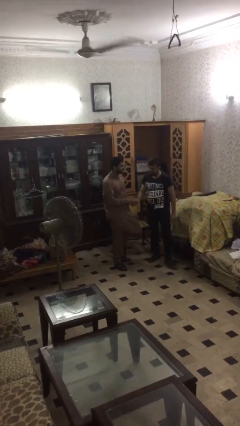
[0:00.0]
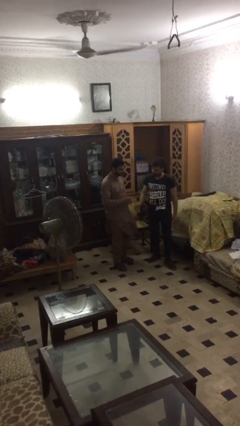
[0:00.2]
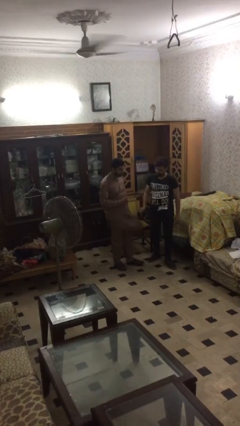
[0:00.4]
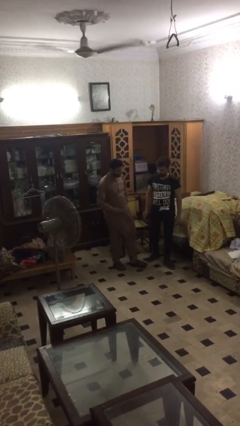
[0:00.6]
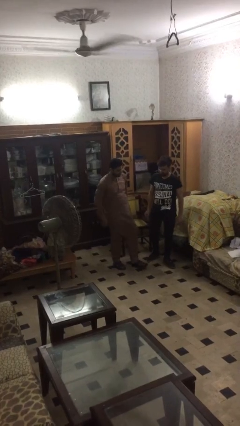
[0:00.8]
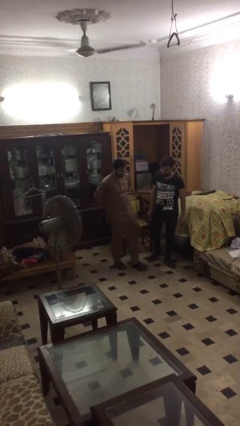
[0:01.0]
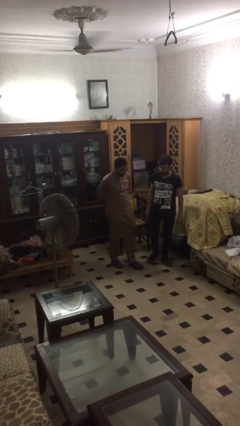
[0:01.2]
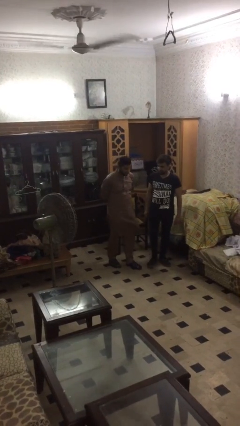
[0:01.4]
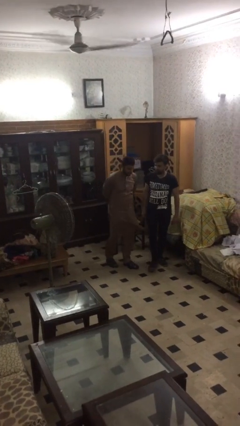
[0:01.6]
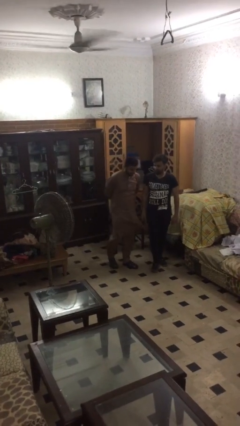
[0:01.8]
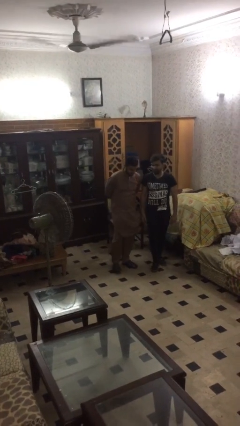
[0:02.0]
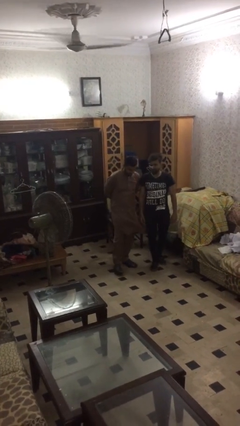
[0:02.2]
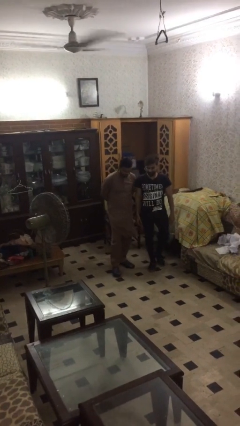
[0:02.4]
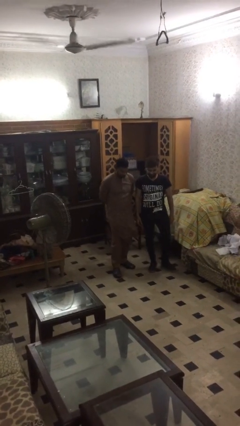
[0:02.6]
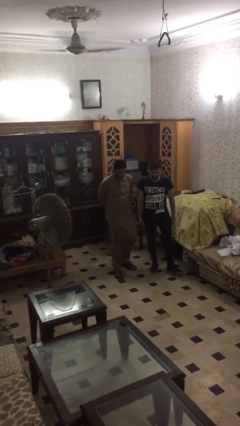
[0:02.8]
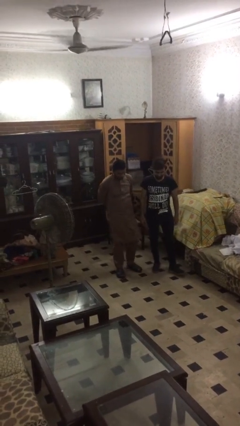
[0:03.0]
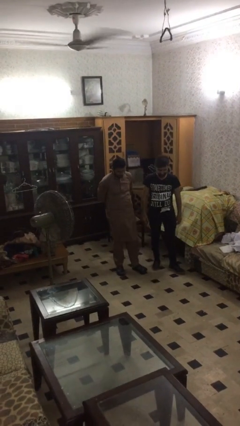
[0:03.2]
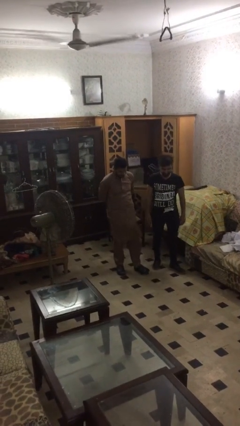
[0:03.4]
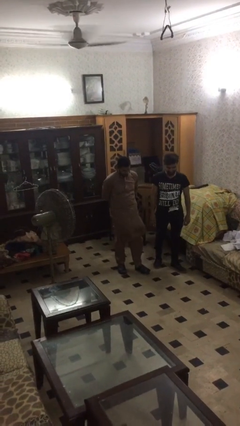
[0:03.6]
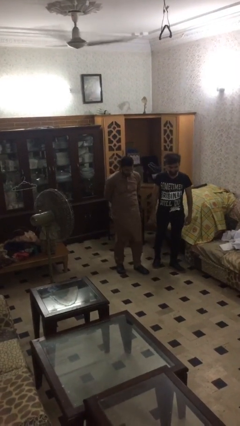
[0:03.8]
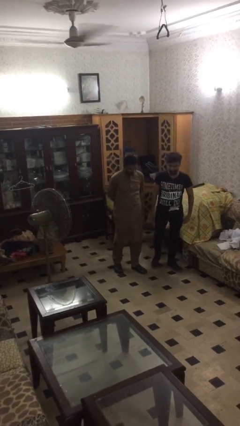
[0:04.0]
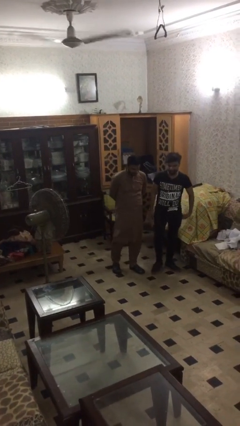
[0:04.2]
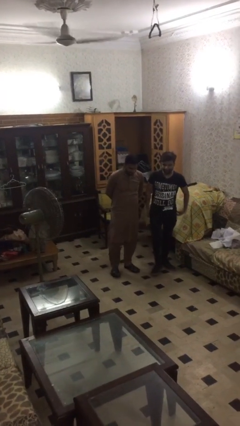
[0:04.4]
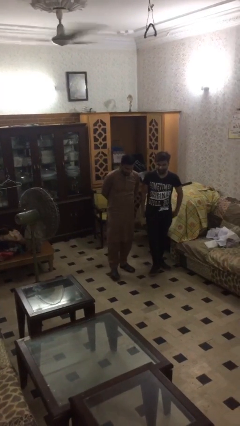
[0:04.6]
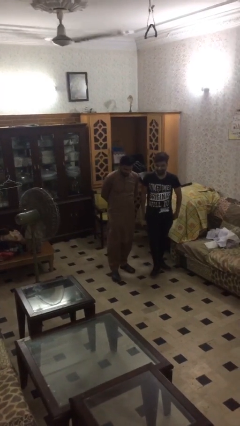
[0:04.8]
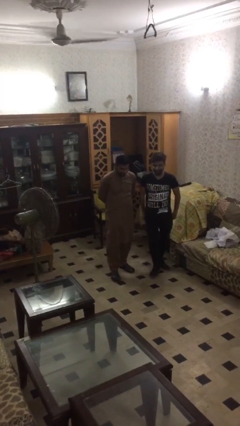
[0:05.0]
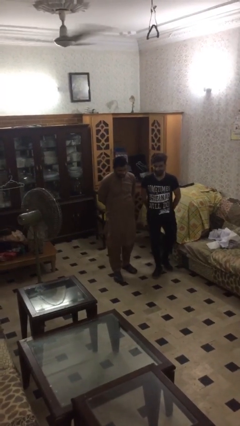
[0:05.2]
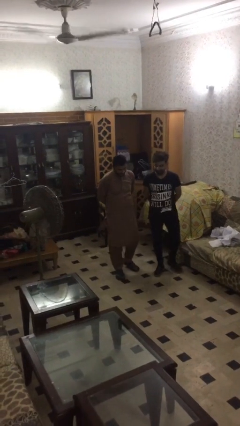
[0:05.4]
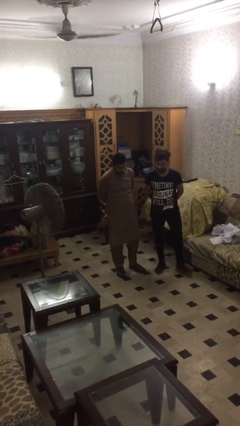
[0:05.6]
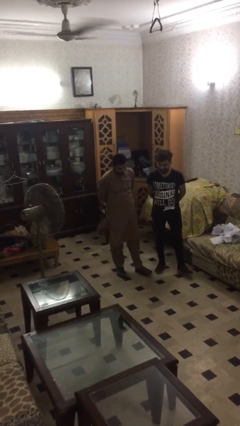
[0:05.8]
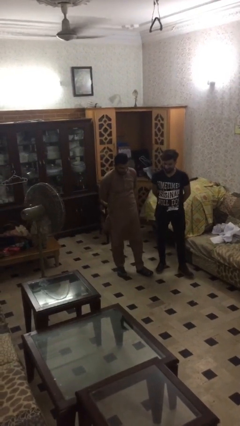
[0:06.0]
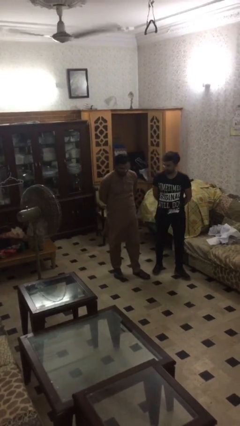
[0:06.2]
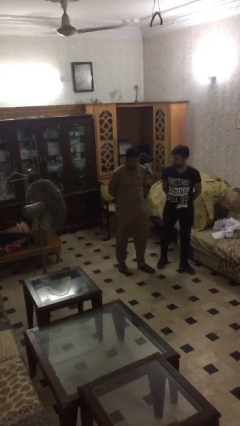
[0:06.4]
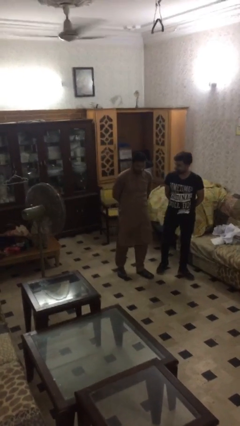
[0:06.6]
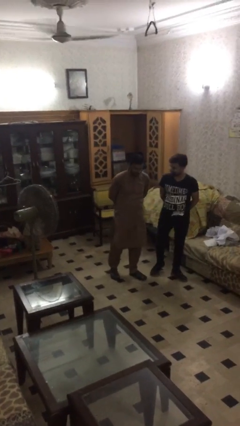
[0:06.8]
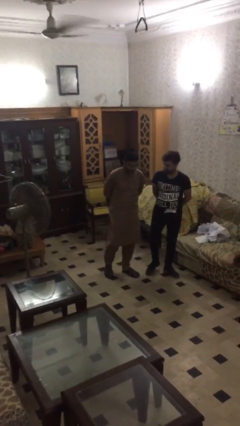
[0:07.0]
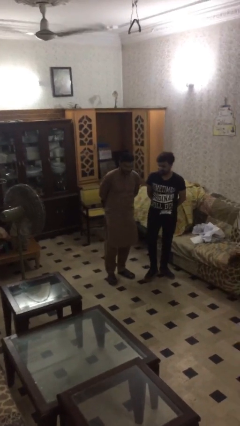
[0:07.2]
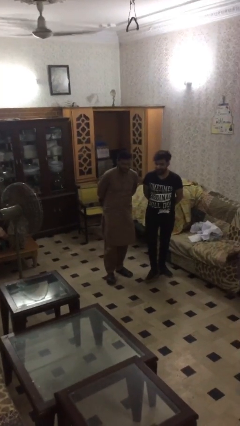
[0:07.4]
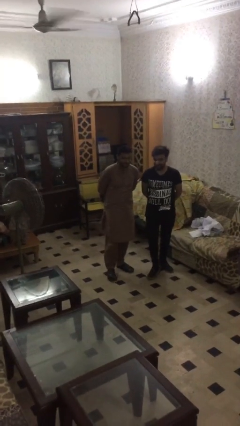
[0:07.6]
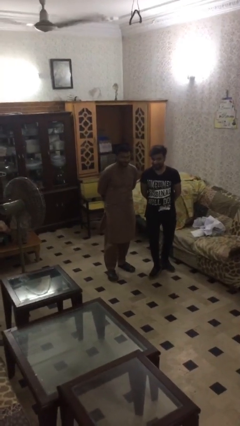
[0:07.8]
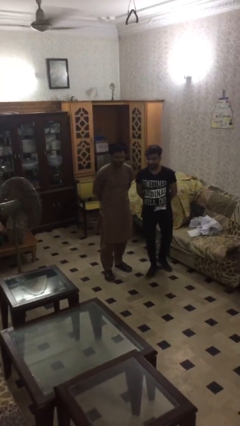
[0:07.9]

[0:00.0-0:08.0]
person talks to person

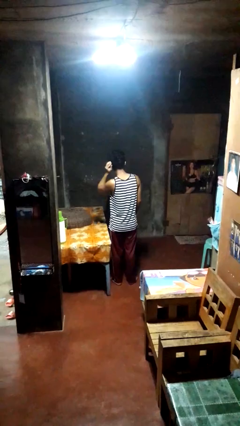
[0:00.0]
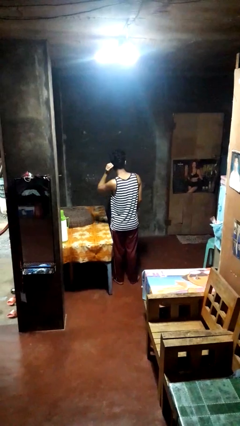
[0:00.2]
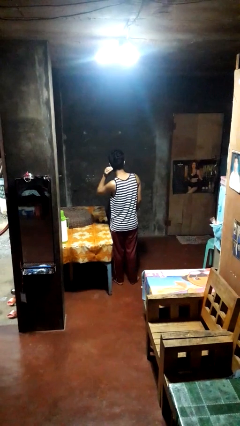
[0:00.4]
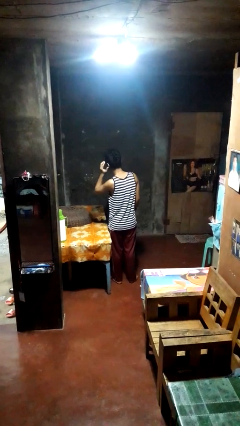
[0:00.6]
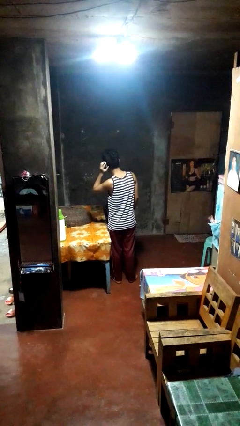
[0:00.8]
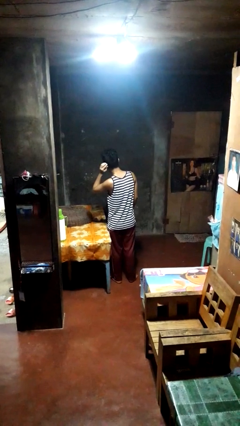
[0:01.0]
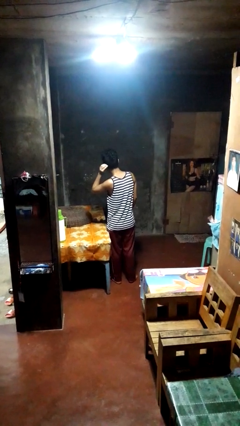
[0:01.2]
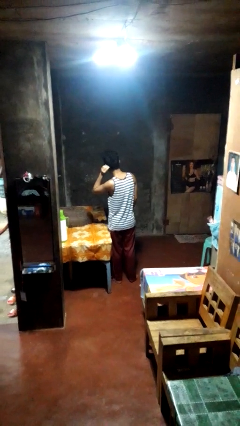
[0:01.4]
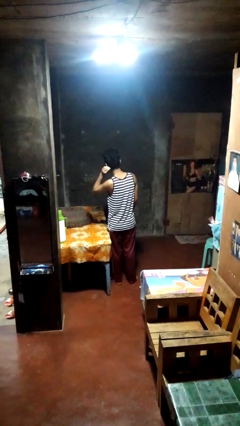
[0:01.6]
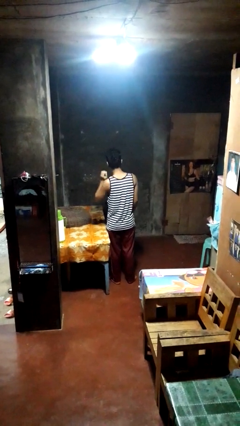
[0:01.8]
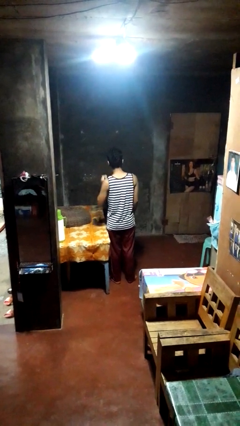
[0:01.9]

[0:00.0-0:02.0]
person strokes hair

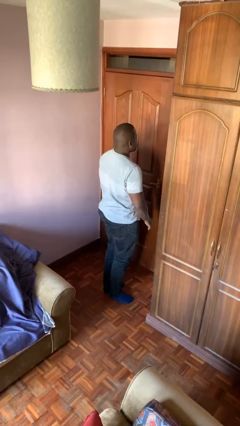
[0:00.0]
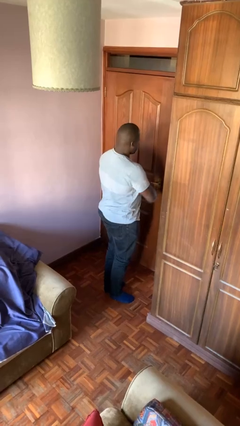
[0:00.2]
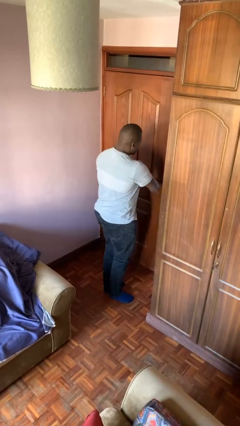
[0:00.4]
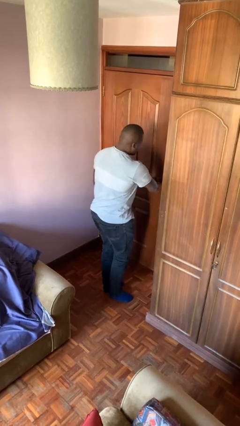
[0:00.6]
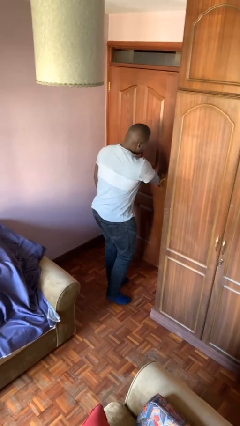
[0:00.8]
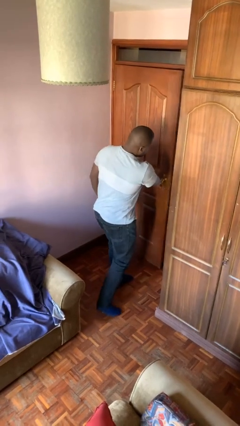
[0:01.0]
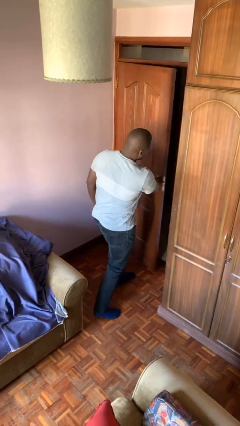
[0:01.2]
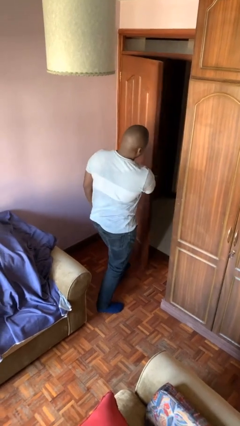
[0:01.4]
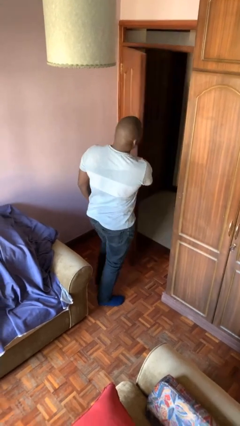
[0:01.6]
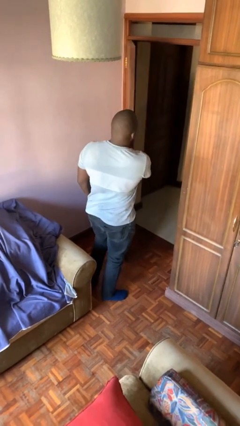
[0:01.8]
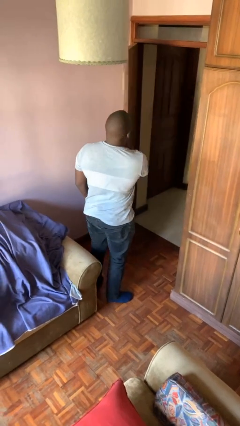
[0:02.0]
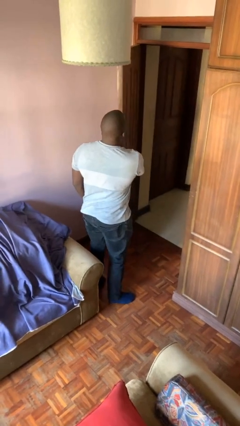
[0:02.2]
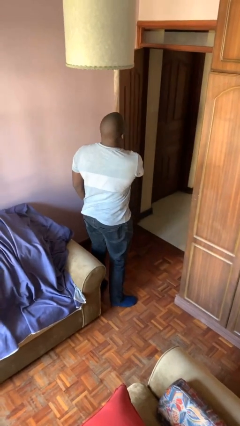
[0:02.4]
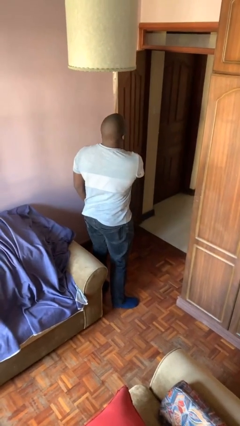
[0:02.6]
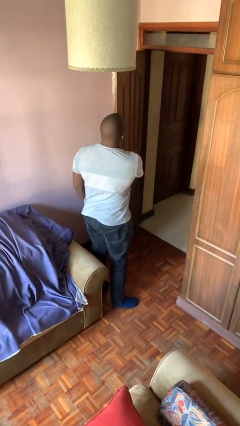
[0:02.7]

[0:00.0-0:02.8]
person opens facility door

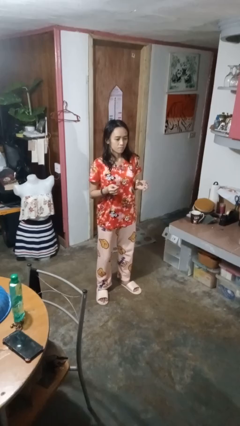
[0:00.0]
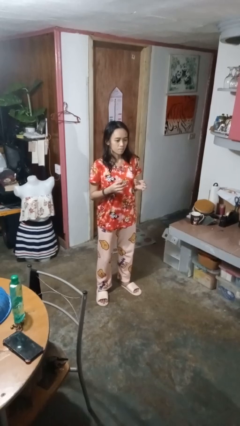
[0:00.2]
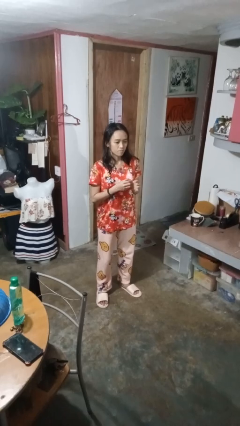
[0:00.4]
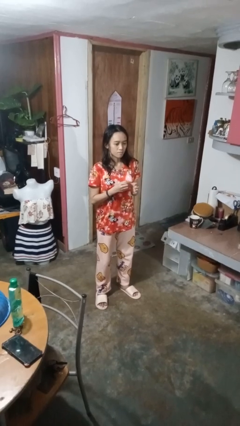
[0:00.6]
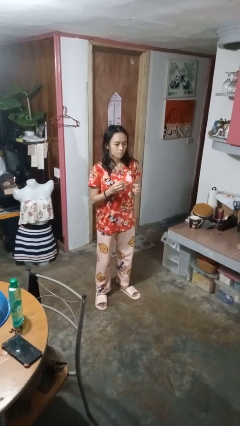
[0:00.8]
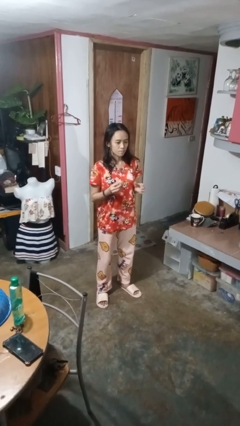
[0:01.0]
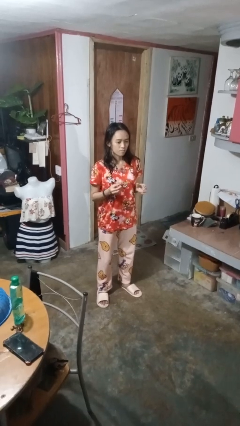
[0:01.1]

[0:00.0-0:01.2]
person takes off ring

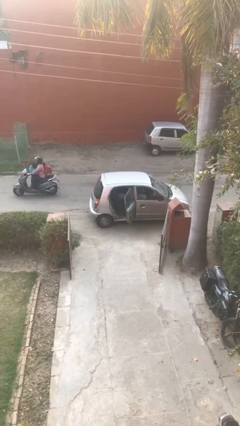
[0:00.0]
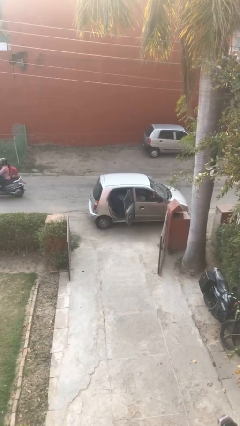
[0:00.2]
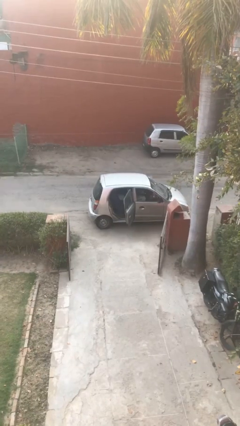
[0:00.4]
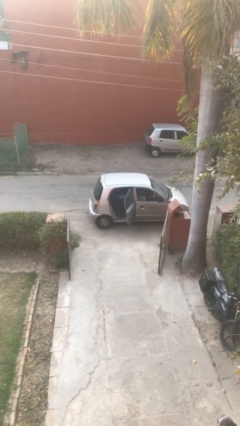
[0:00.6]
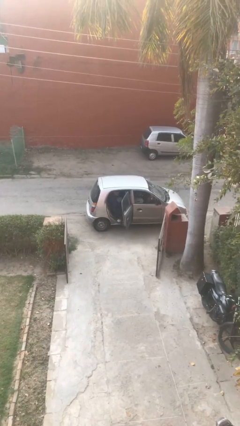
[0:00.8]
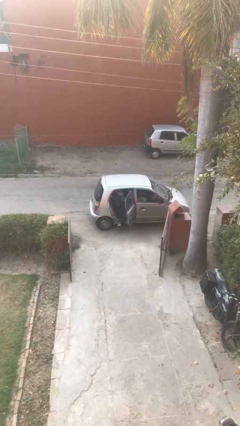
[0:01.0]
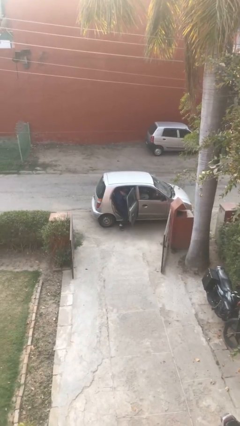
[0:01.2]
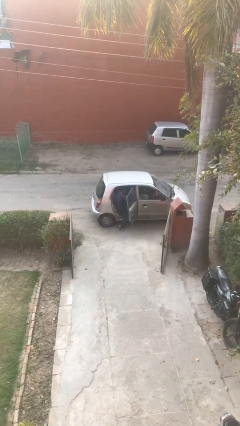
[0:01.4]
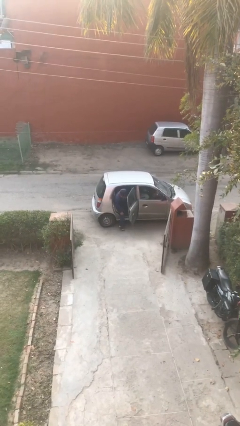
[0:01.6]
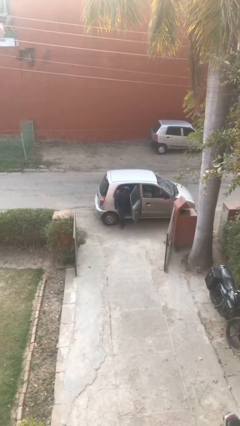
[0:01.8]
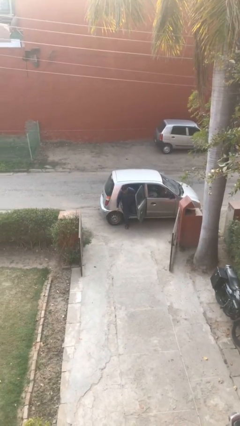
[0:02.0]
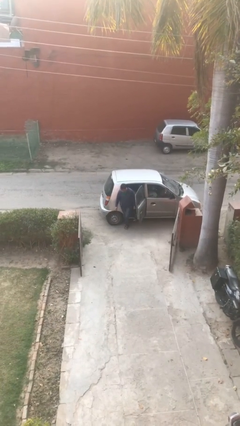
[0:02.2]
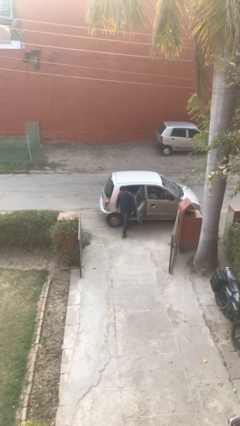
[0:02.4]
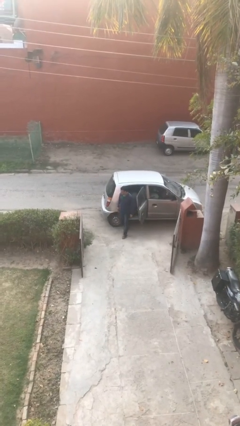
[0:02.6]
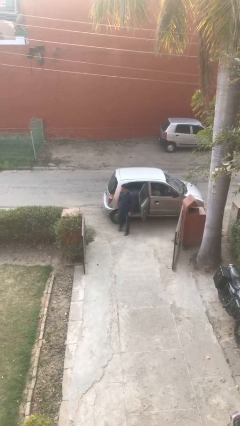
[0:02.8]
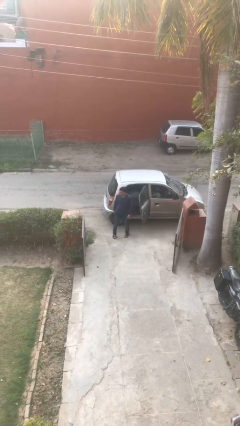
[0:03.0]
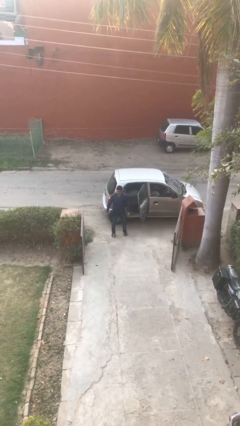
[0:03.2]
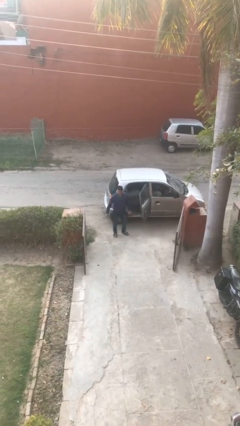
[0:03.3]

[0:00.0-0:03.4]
person exits car

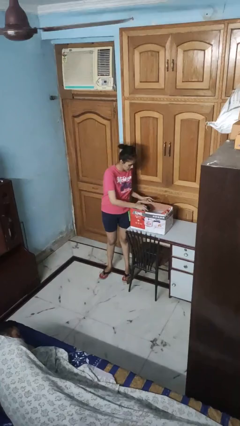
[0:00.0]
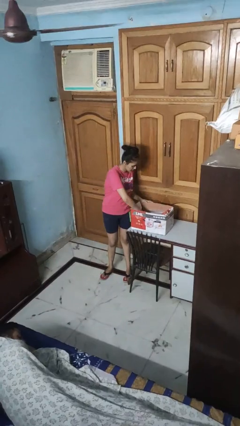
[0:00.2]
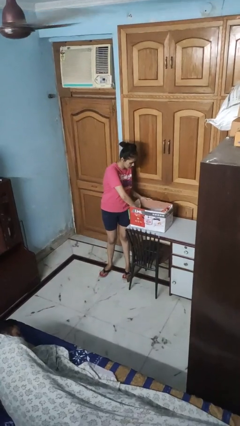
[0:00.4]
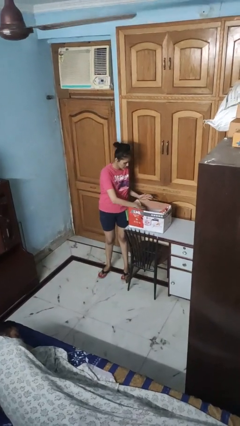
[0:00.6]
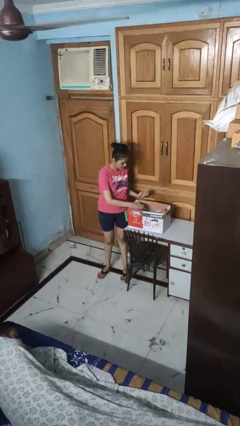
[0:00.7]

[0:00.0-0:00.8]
person puts object into box
